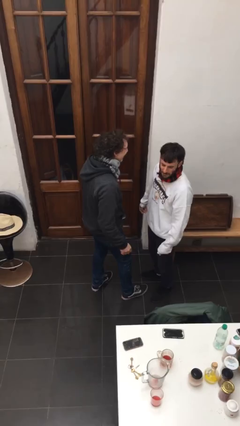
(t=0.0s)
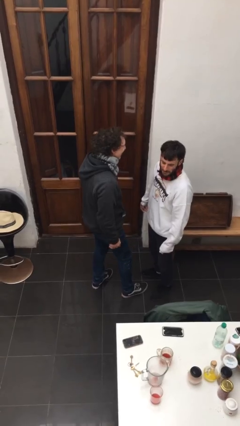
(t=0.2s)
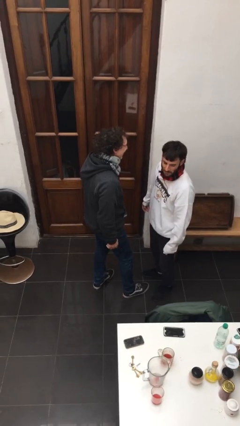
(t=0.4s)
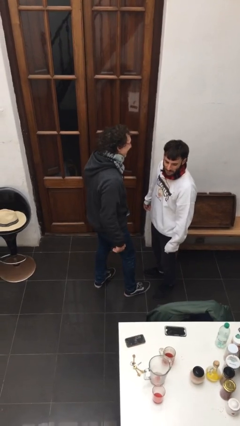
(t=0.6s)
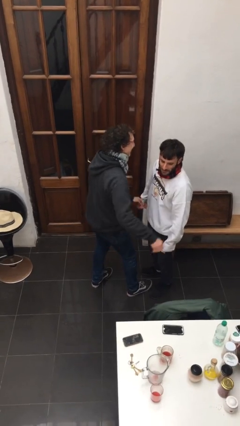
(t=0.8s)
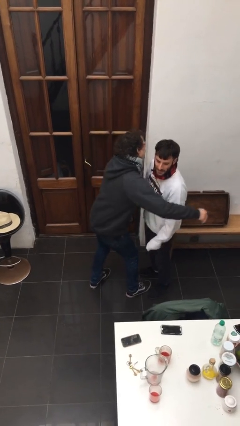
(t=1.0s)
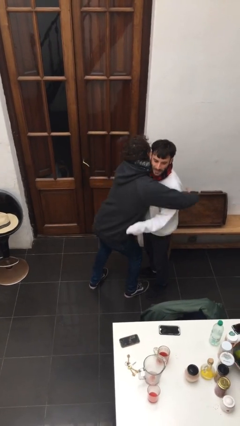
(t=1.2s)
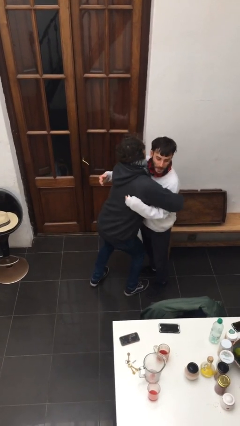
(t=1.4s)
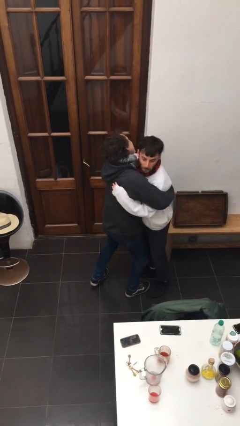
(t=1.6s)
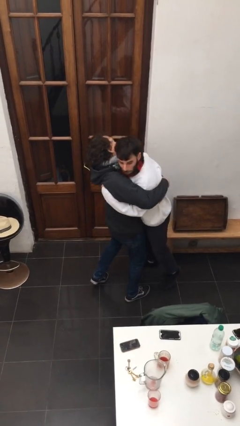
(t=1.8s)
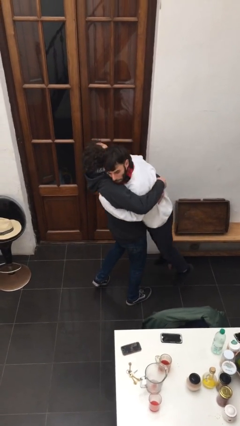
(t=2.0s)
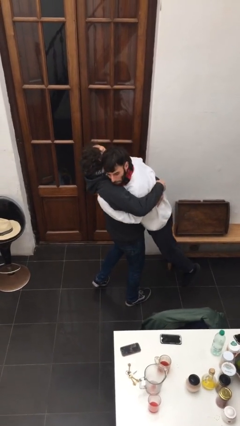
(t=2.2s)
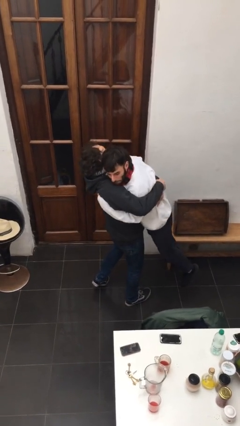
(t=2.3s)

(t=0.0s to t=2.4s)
person picks up person

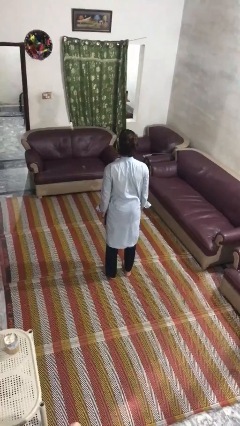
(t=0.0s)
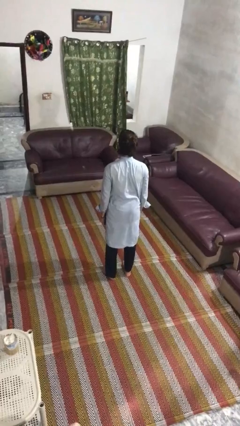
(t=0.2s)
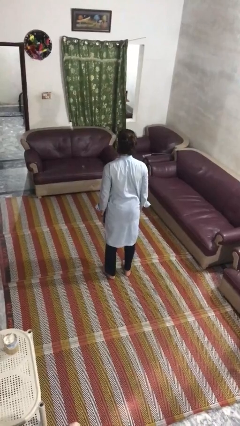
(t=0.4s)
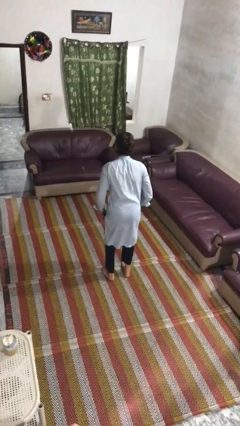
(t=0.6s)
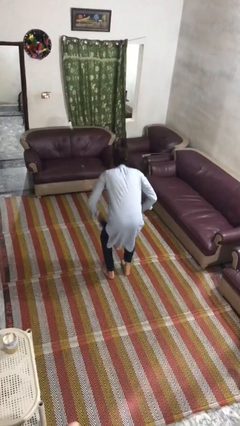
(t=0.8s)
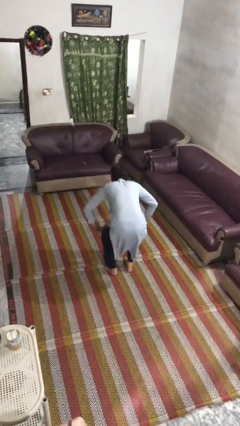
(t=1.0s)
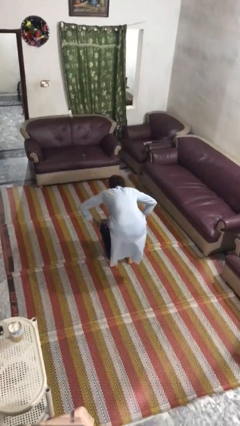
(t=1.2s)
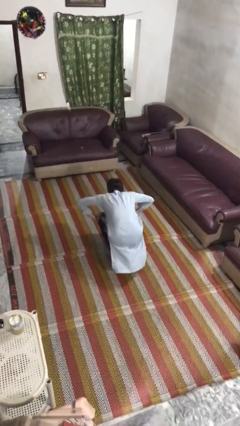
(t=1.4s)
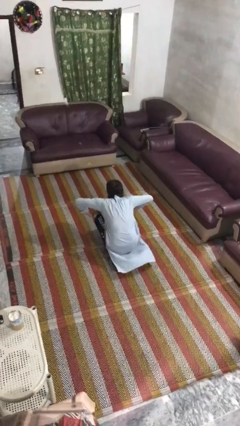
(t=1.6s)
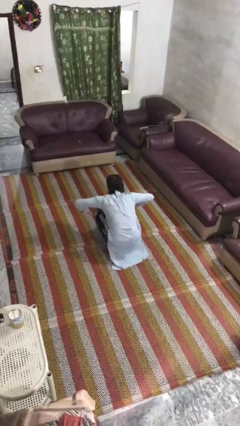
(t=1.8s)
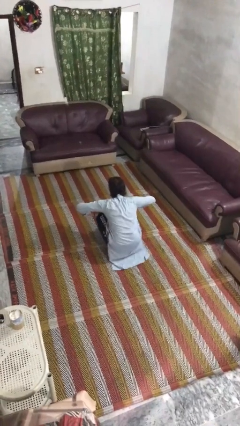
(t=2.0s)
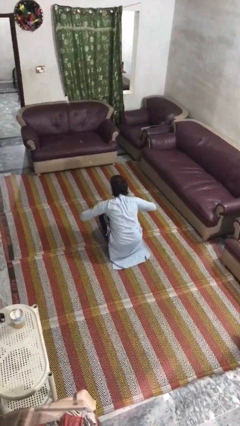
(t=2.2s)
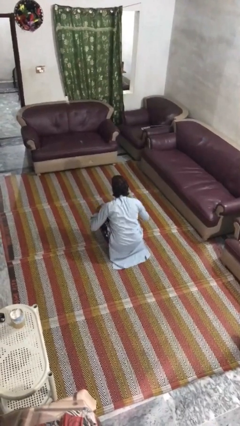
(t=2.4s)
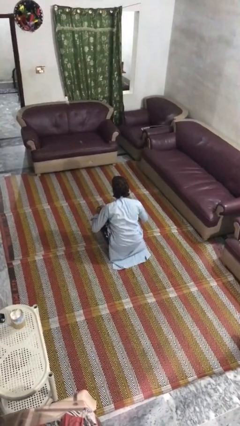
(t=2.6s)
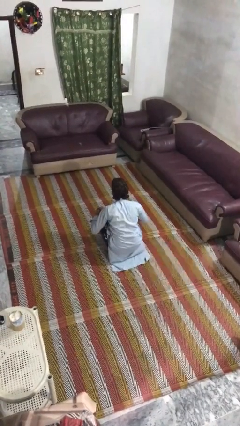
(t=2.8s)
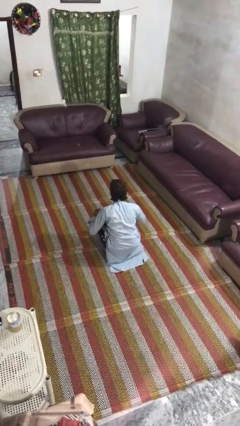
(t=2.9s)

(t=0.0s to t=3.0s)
person squats

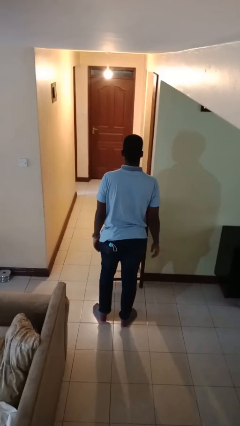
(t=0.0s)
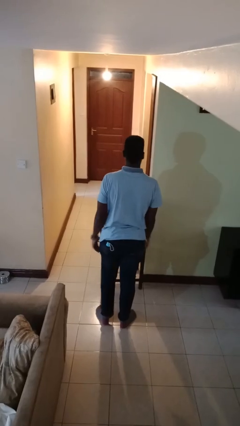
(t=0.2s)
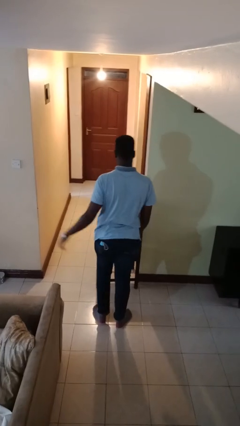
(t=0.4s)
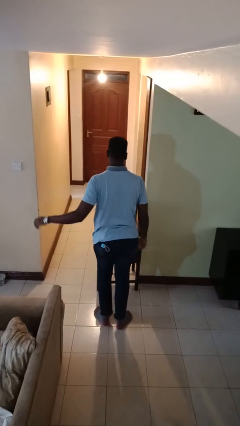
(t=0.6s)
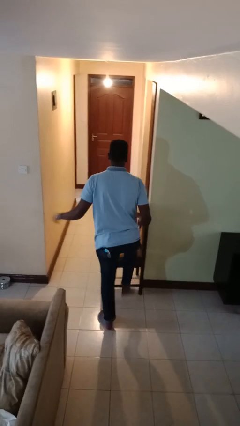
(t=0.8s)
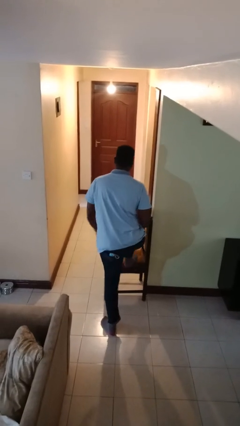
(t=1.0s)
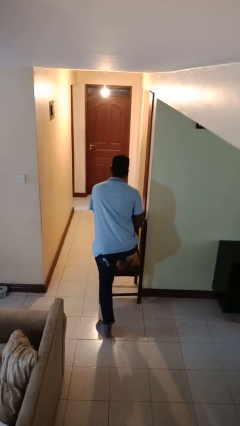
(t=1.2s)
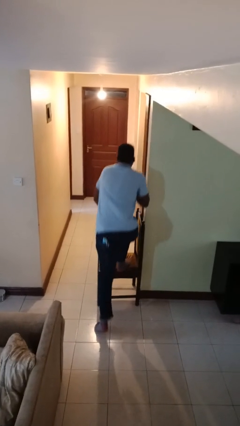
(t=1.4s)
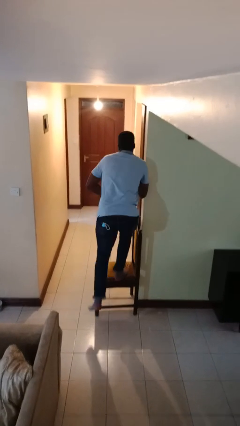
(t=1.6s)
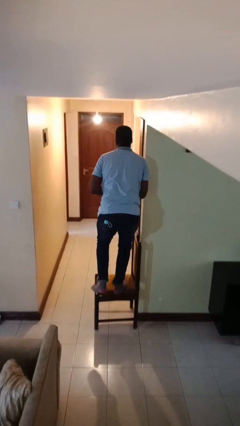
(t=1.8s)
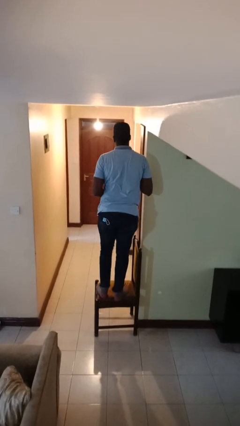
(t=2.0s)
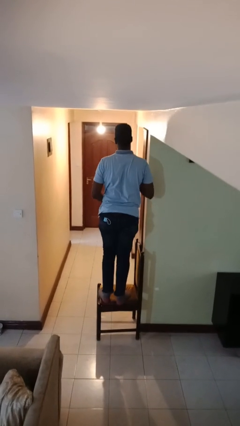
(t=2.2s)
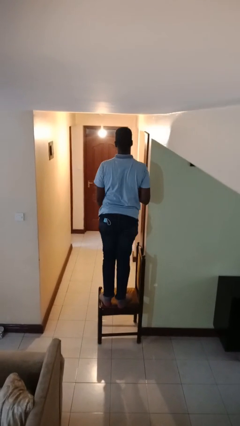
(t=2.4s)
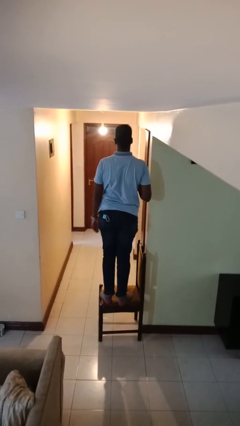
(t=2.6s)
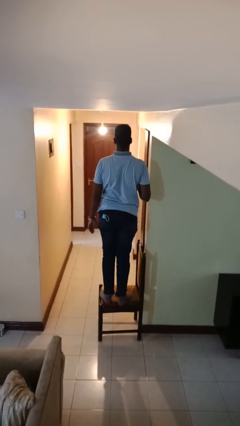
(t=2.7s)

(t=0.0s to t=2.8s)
person climbs on chair

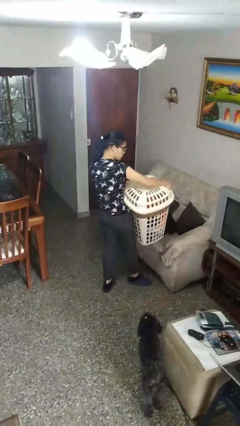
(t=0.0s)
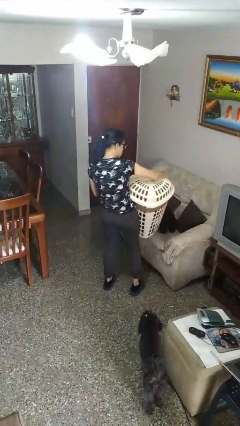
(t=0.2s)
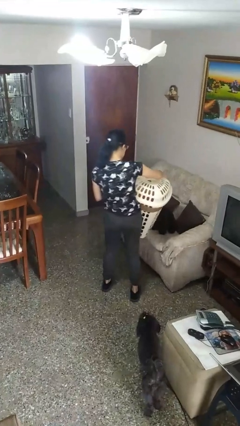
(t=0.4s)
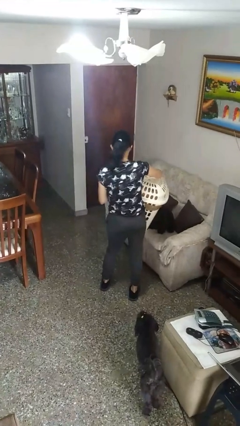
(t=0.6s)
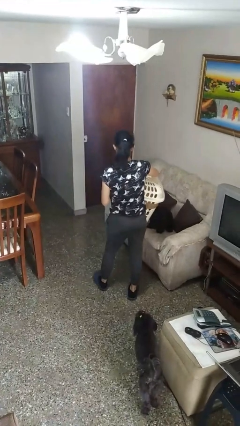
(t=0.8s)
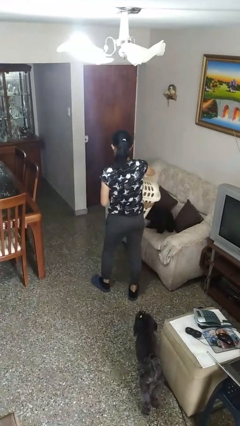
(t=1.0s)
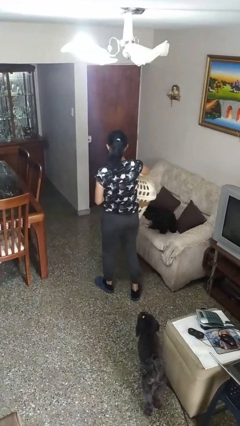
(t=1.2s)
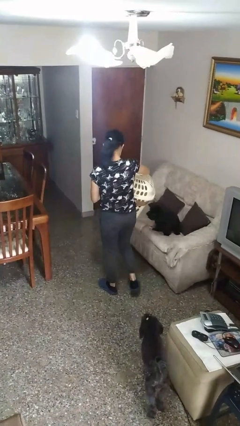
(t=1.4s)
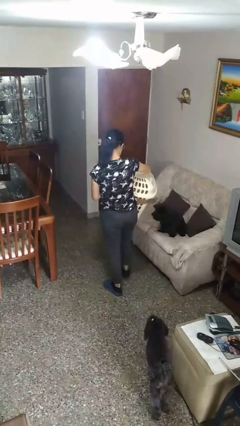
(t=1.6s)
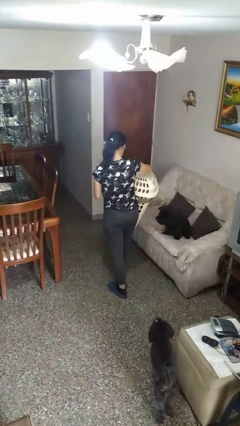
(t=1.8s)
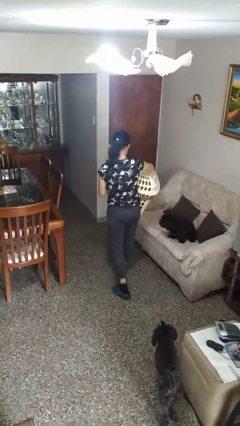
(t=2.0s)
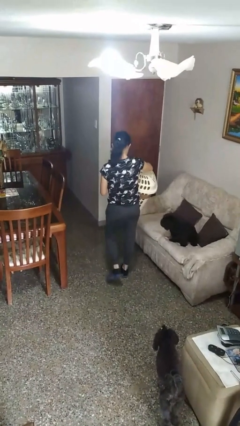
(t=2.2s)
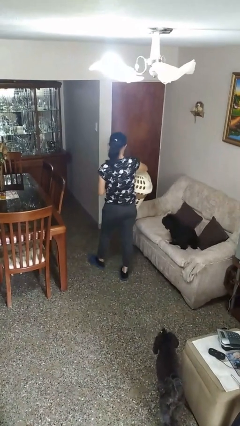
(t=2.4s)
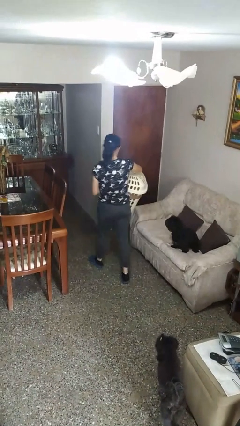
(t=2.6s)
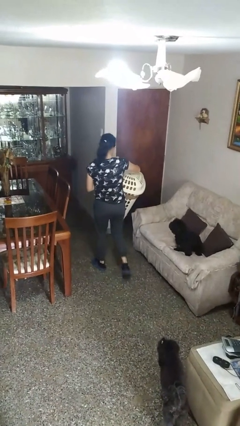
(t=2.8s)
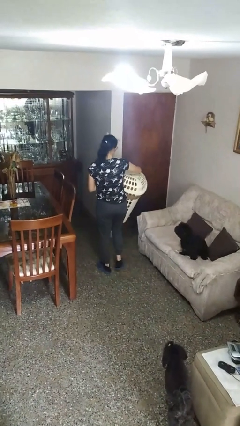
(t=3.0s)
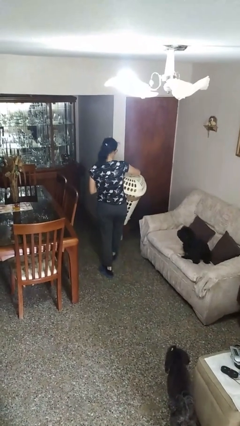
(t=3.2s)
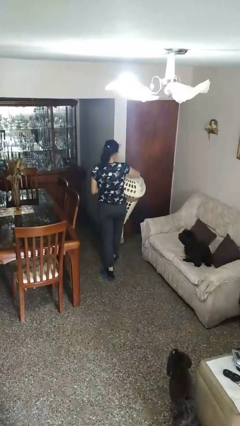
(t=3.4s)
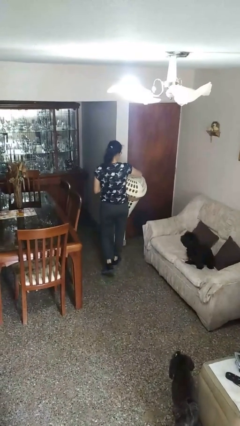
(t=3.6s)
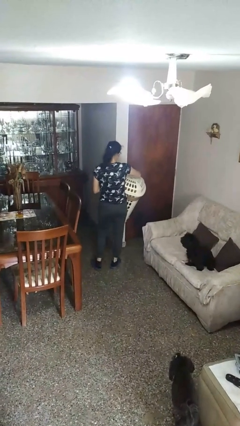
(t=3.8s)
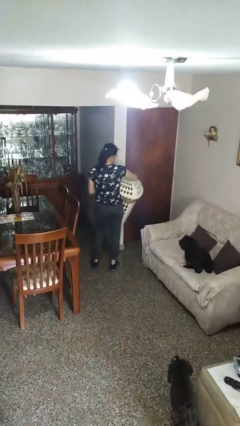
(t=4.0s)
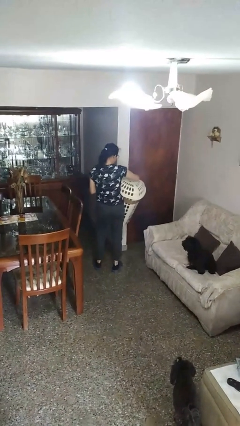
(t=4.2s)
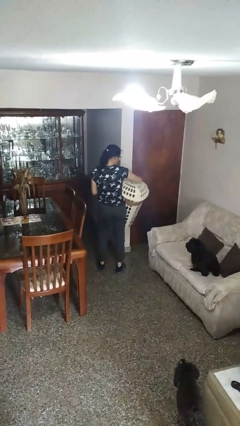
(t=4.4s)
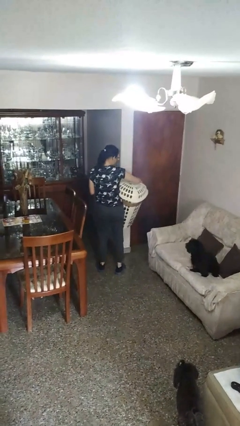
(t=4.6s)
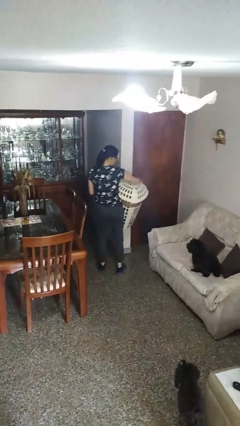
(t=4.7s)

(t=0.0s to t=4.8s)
person carries laundry basket

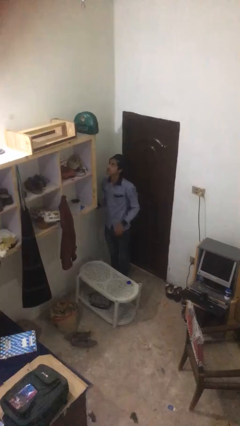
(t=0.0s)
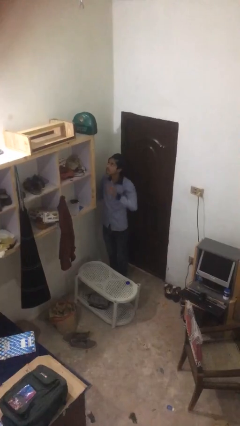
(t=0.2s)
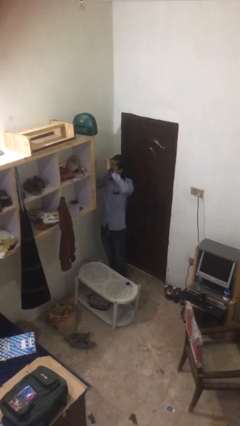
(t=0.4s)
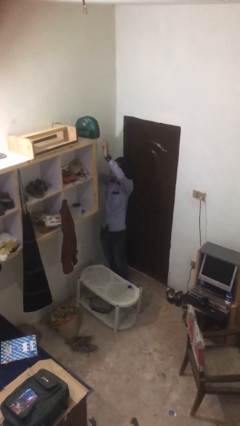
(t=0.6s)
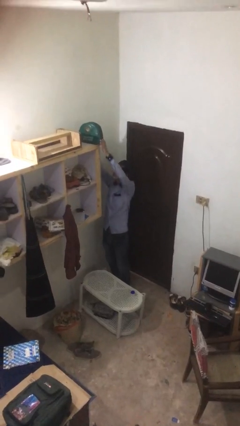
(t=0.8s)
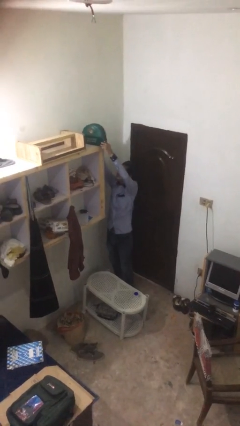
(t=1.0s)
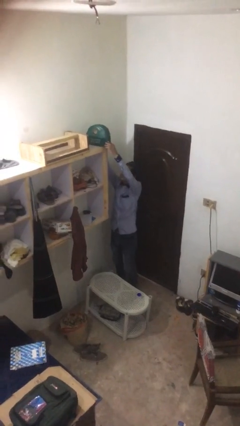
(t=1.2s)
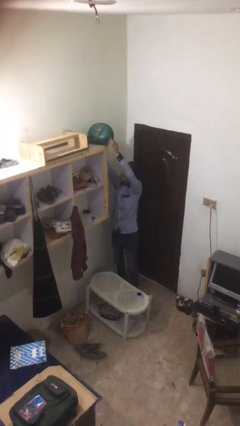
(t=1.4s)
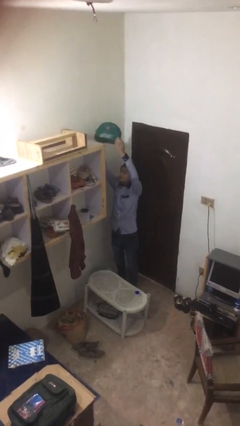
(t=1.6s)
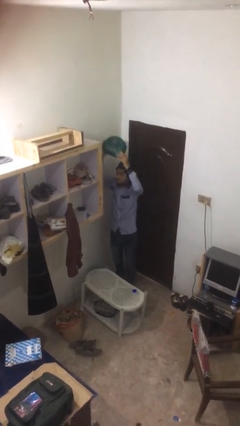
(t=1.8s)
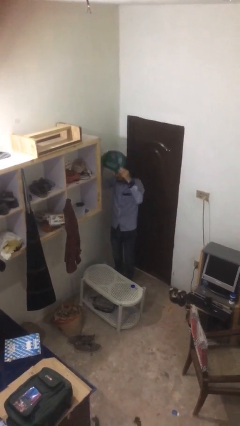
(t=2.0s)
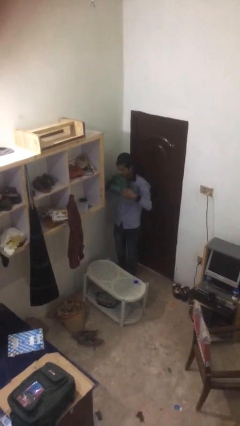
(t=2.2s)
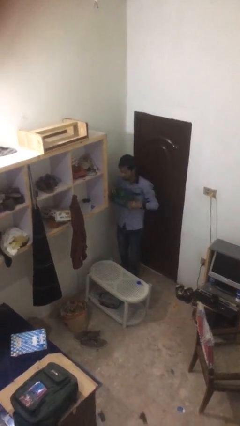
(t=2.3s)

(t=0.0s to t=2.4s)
person picks up object from shelf

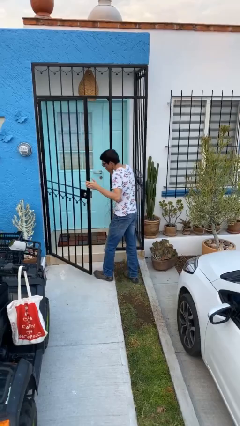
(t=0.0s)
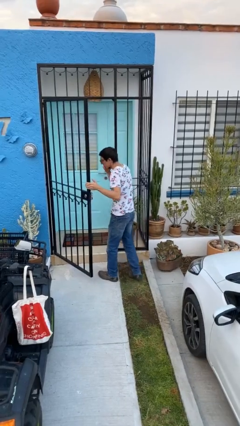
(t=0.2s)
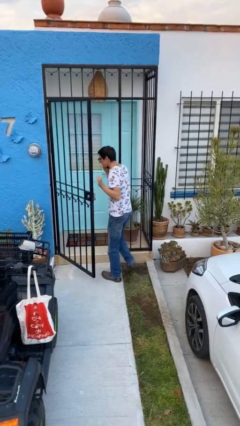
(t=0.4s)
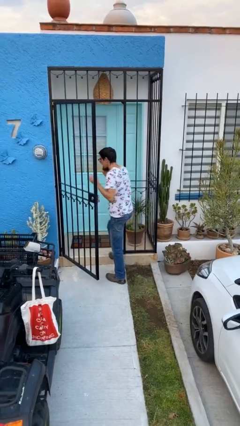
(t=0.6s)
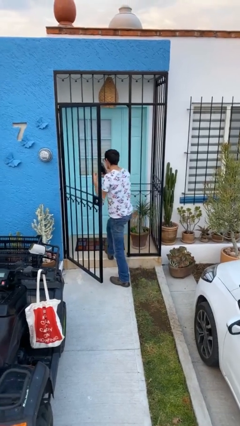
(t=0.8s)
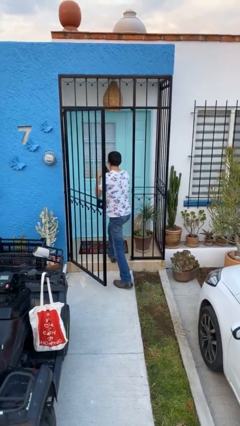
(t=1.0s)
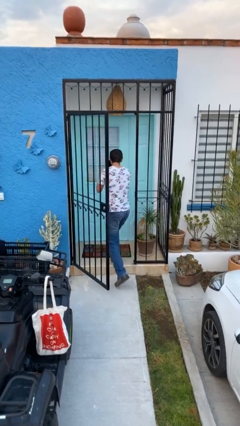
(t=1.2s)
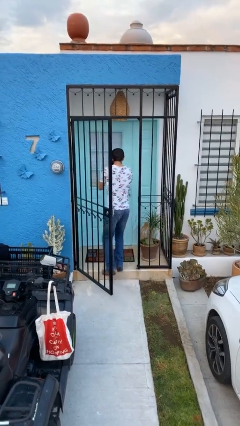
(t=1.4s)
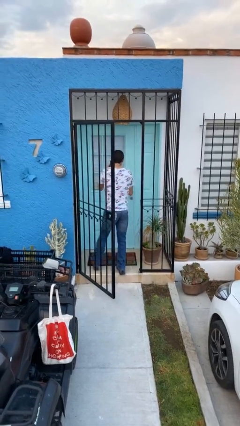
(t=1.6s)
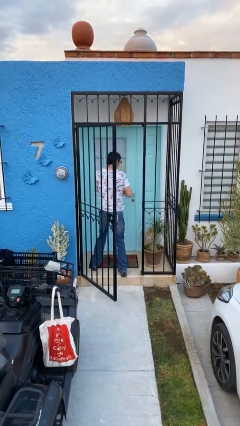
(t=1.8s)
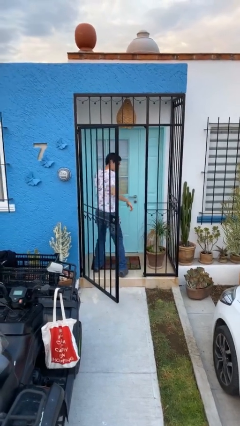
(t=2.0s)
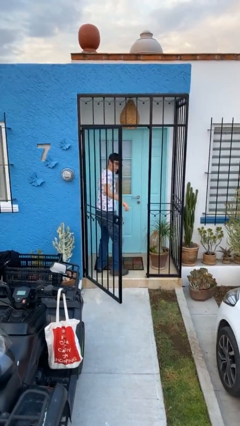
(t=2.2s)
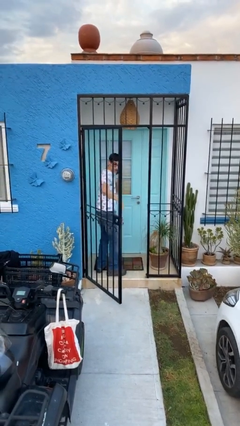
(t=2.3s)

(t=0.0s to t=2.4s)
person exits scene through structure
